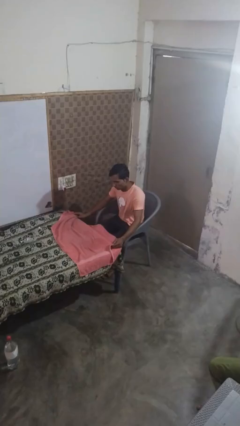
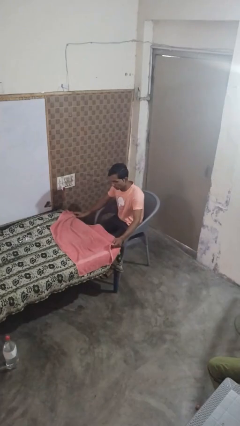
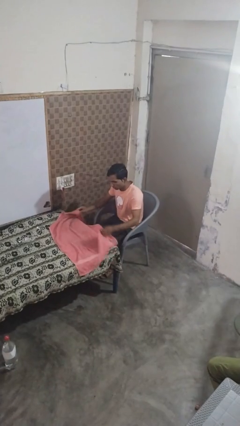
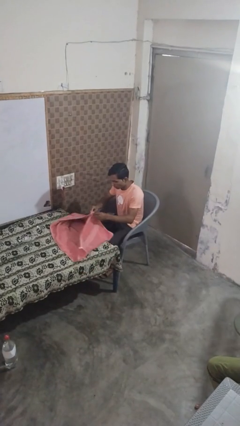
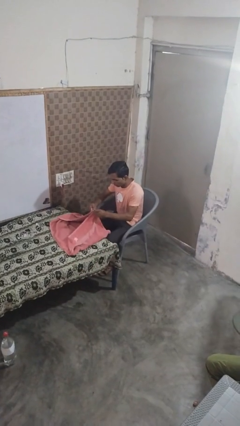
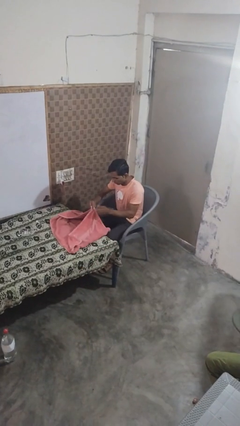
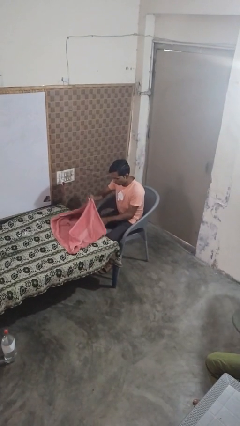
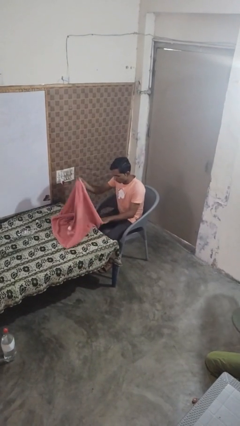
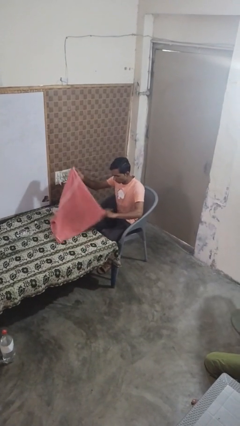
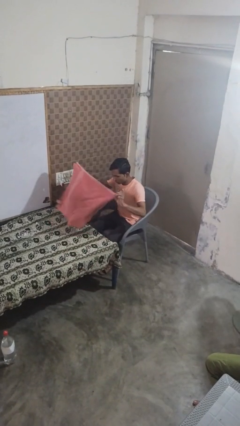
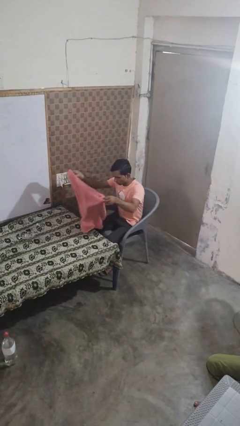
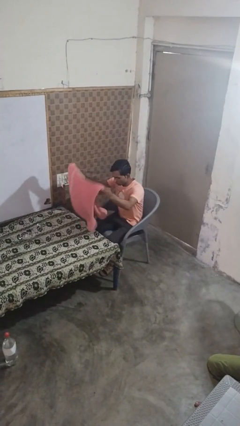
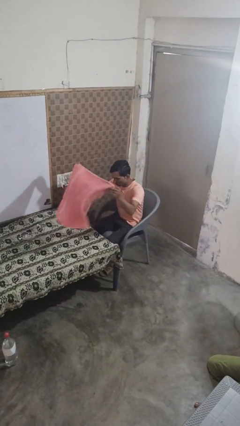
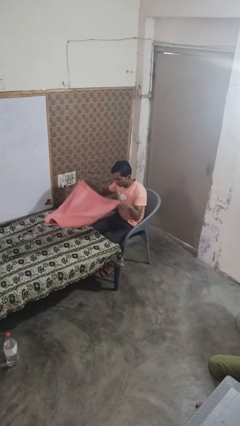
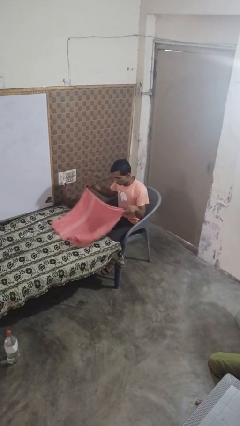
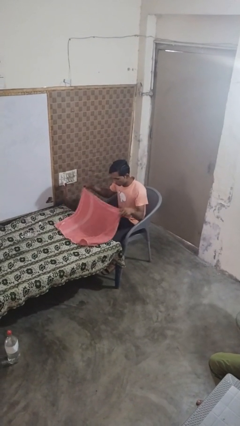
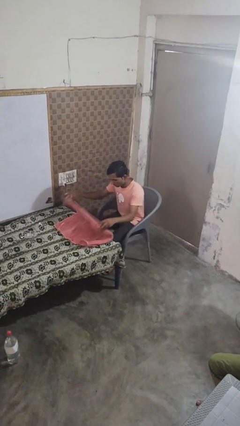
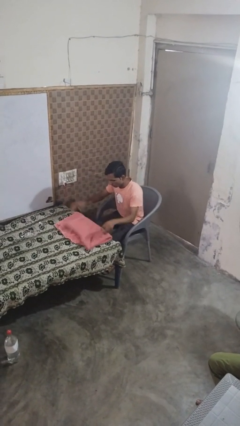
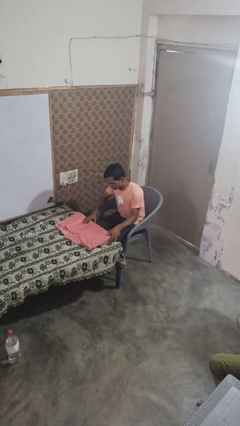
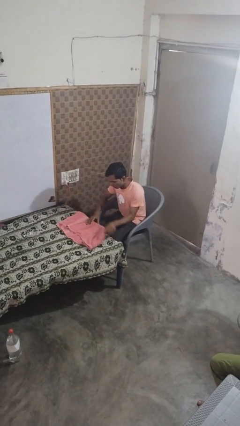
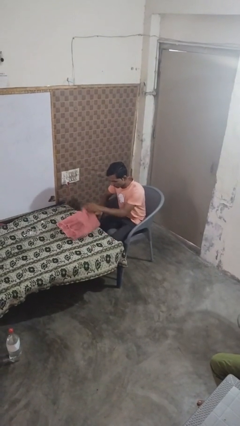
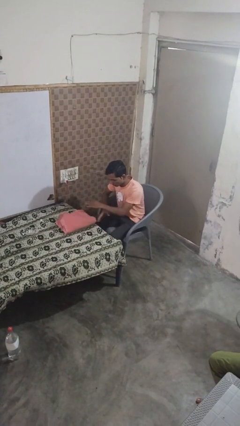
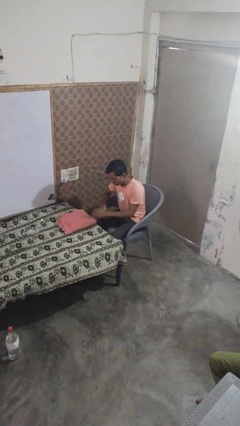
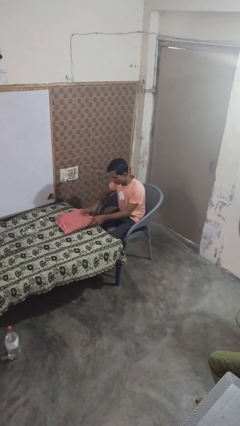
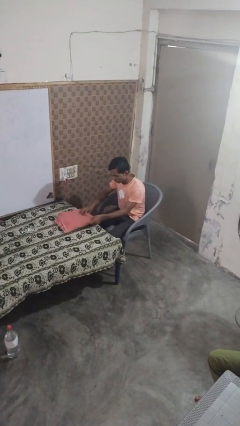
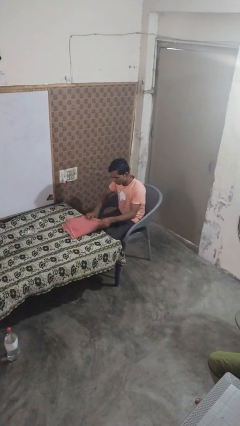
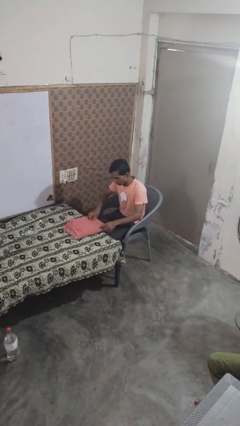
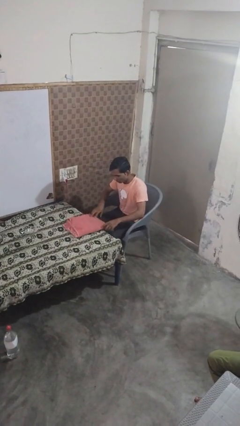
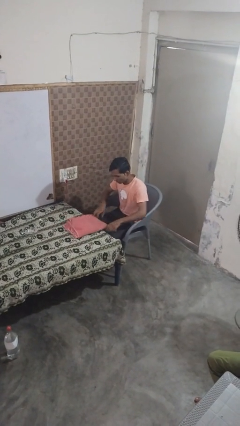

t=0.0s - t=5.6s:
person folds towel

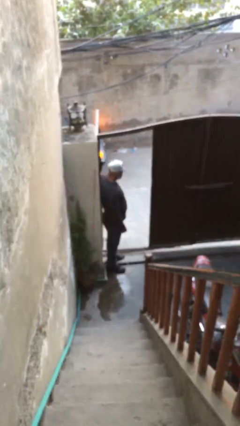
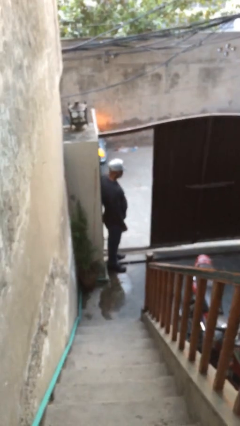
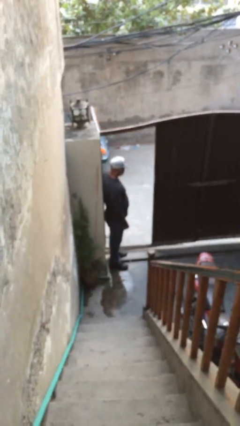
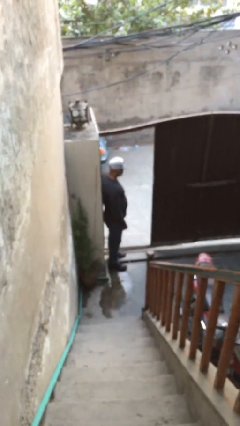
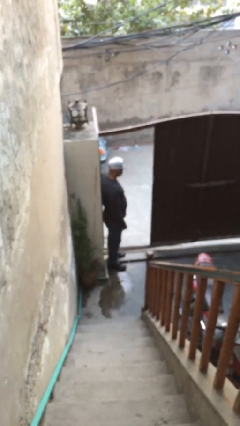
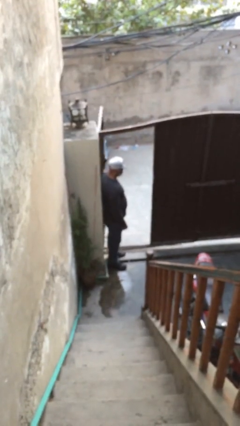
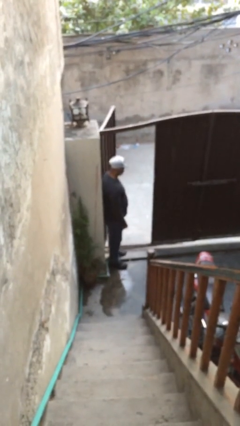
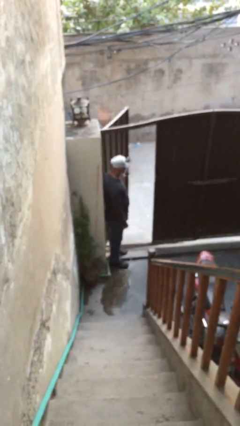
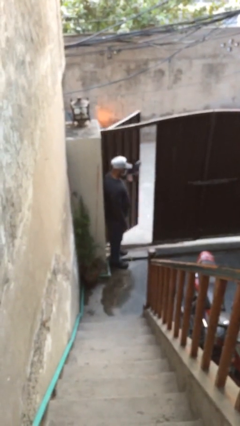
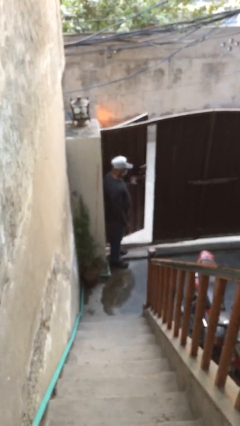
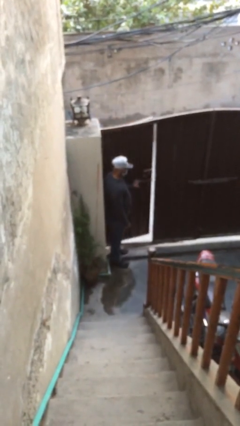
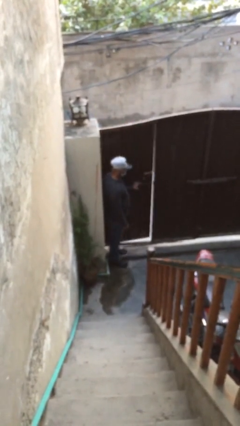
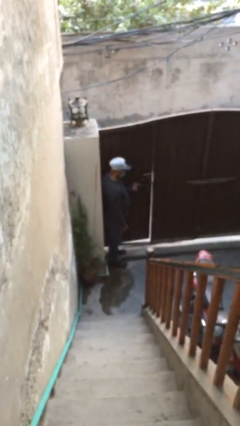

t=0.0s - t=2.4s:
person closes facility door

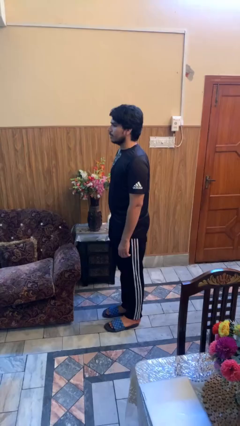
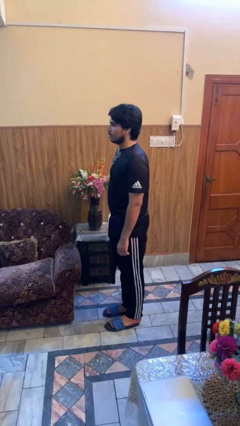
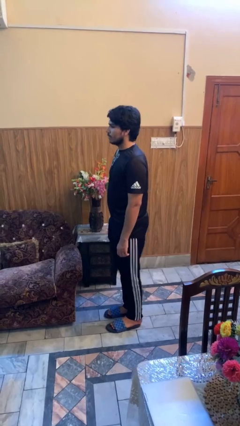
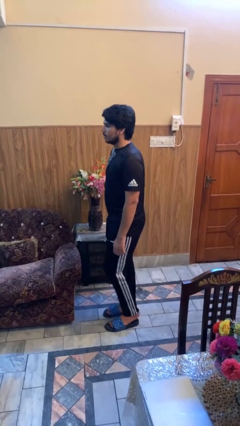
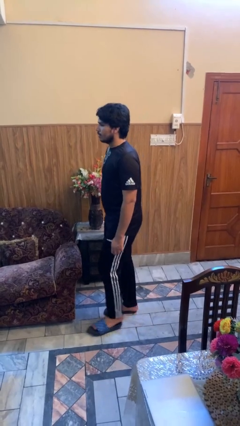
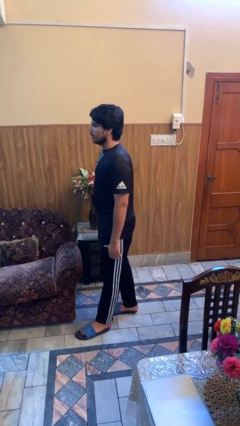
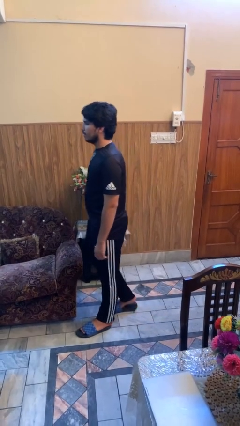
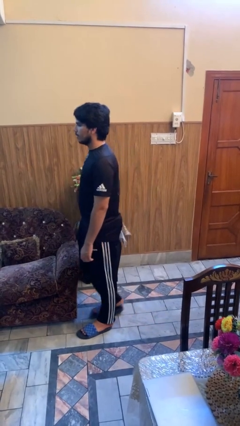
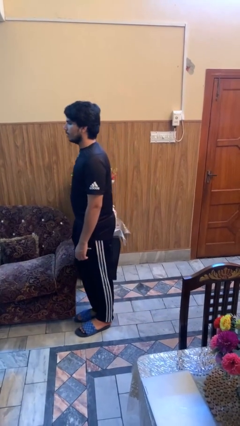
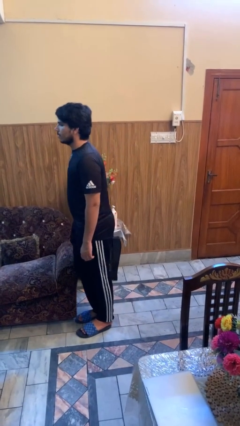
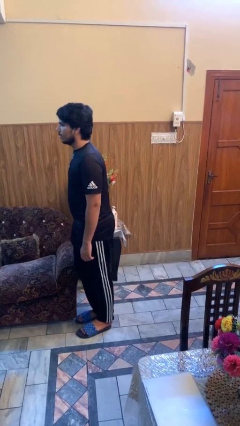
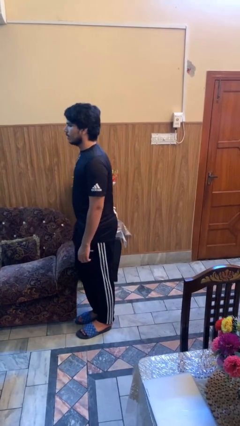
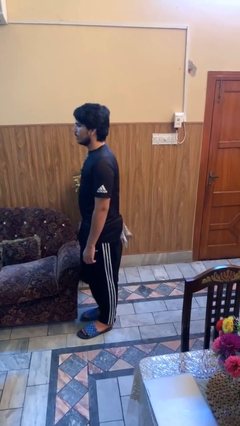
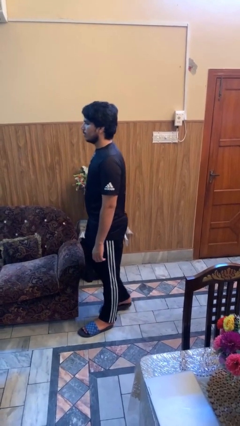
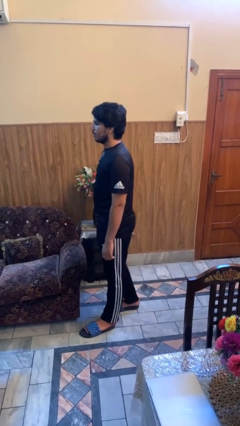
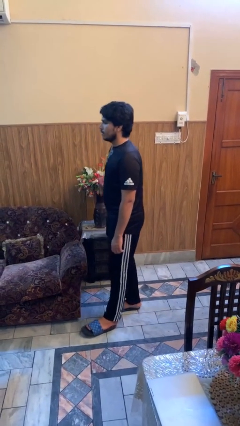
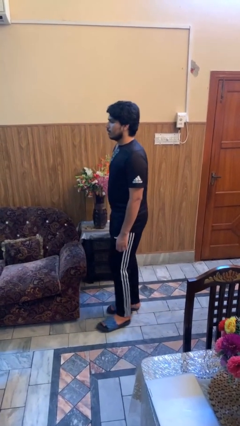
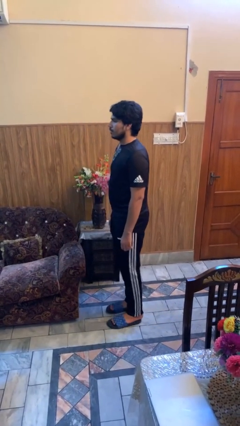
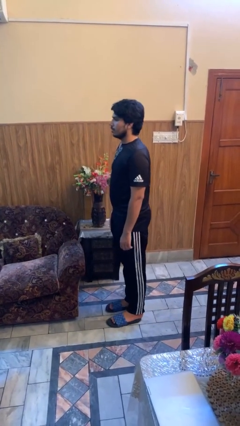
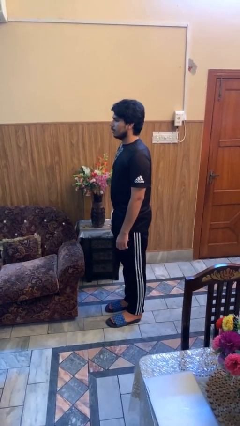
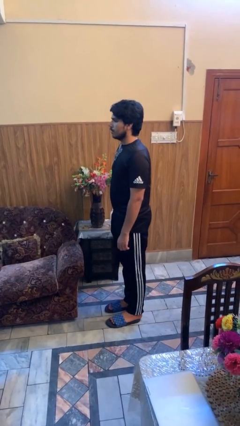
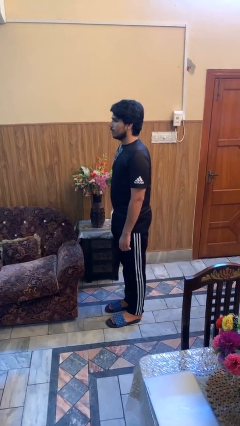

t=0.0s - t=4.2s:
person stubs toe

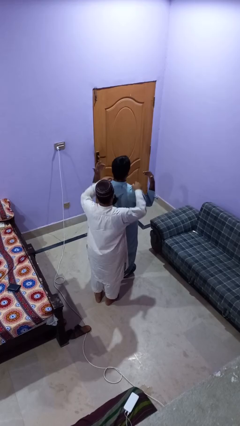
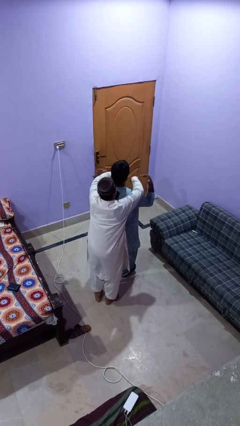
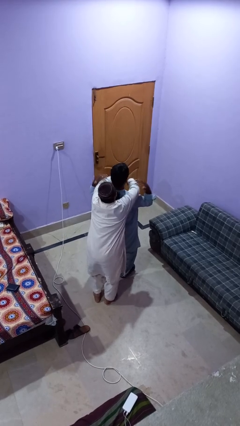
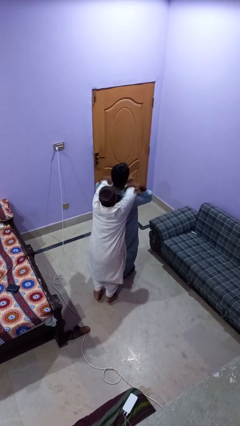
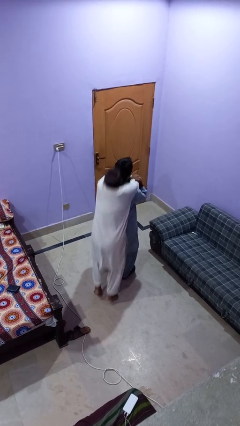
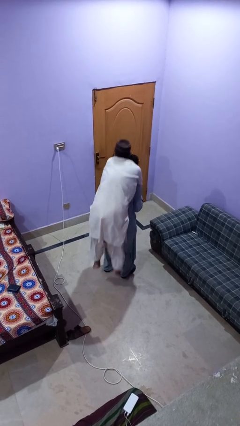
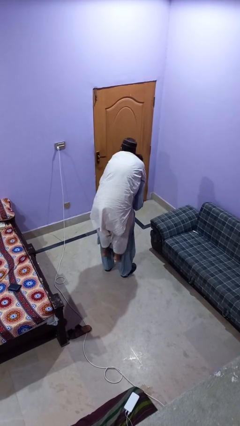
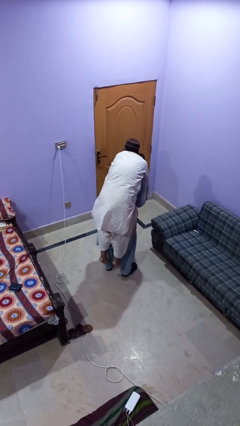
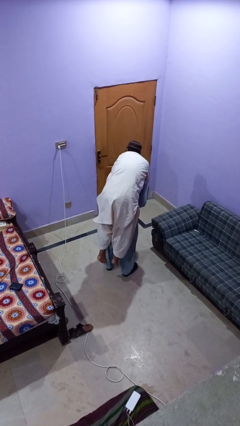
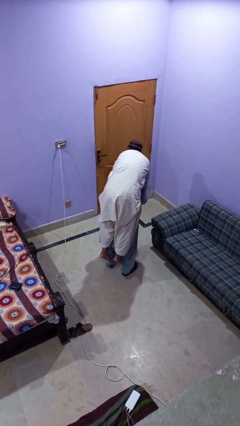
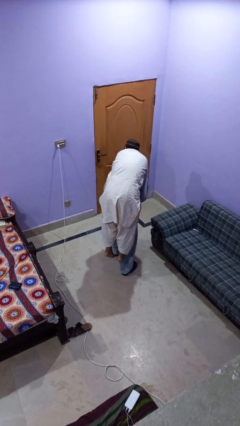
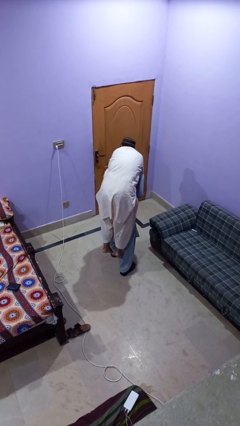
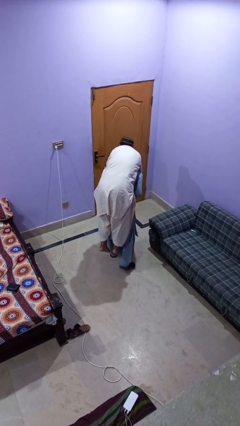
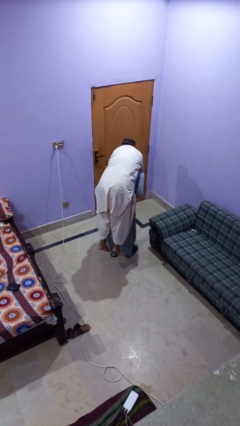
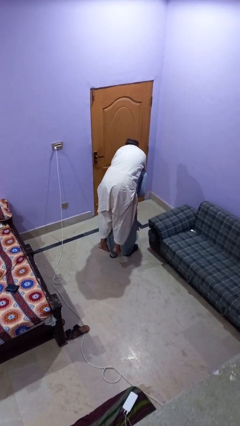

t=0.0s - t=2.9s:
person carries person on back

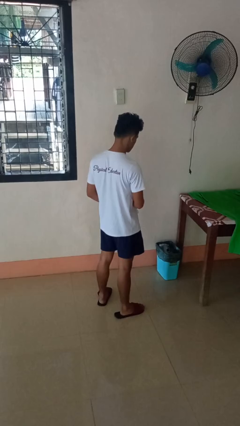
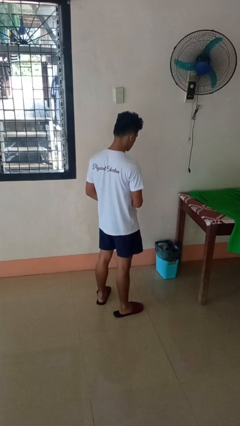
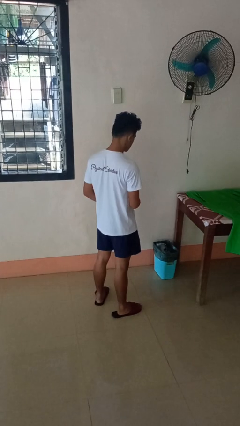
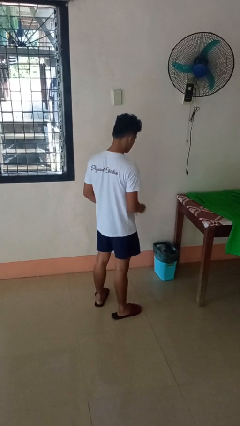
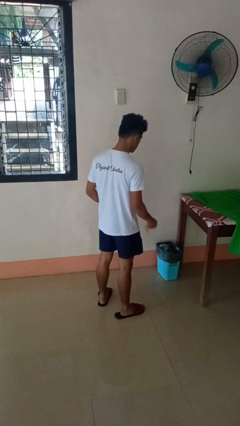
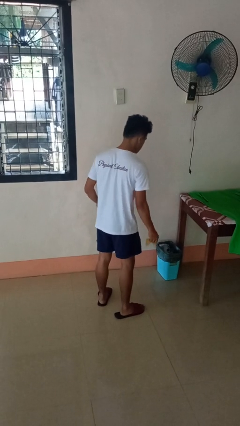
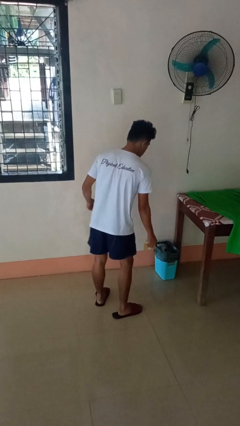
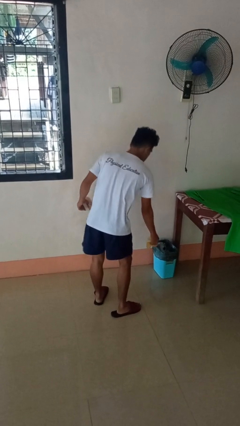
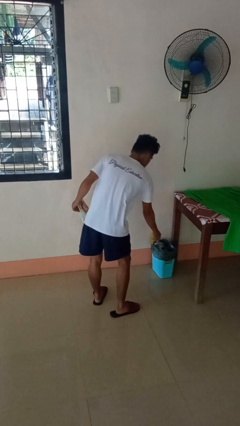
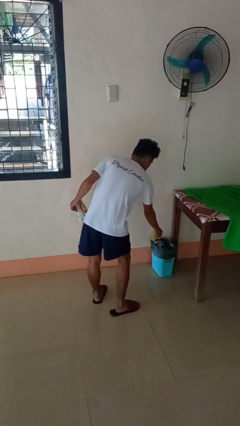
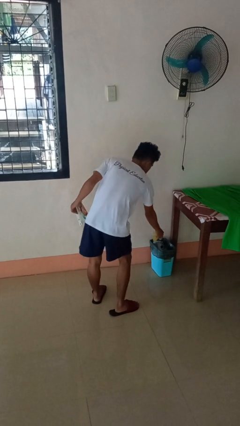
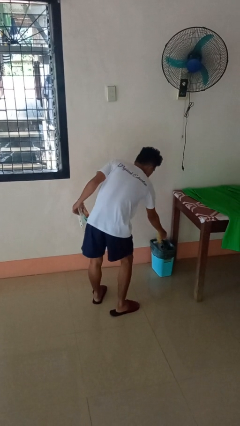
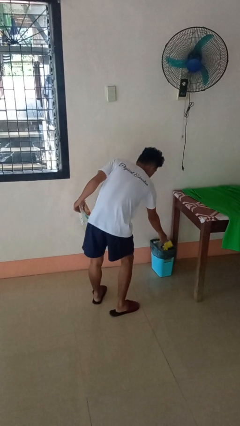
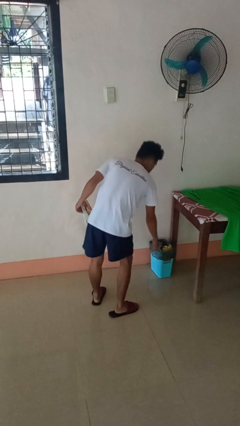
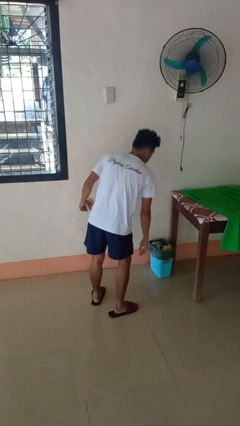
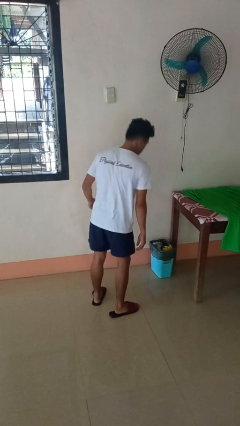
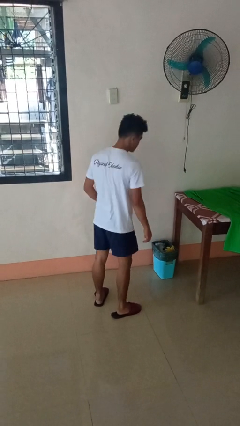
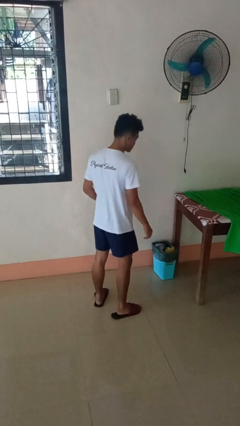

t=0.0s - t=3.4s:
person discards trash
